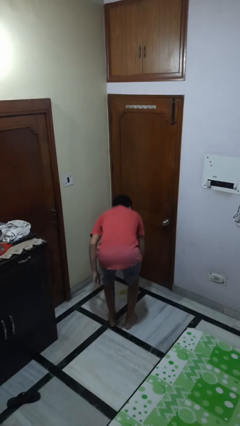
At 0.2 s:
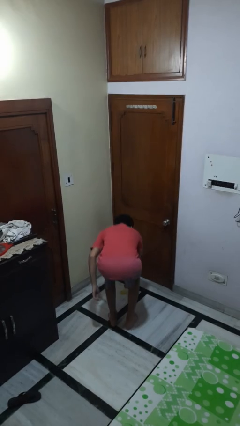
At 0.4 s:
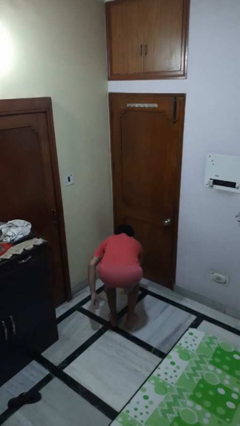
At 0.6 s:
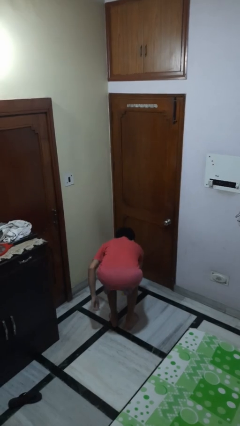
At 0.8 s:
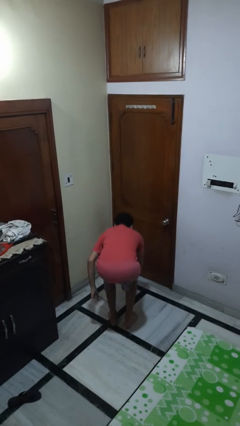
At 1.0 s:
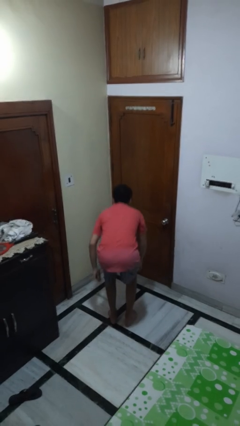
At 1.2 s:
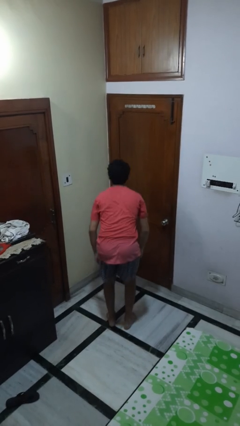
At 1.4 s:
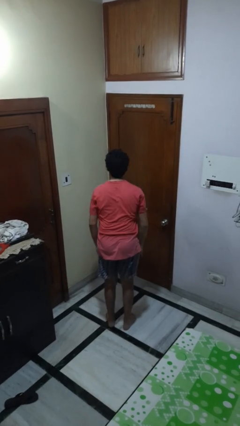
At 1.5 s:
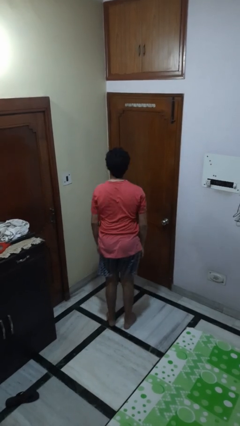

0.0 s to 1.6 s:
person picks up object from floor

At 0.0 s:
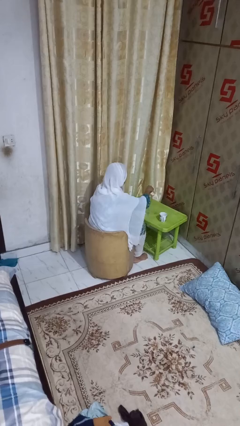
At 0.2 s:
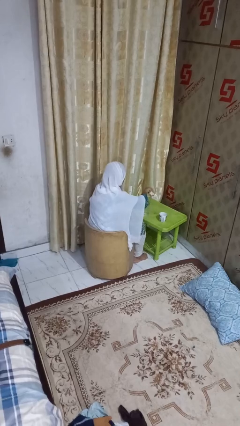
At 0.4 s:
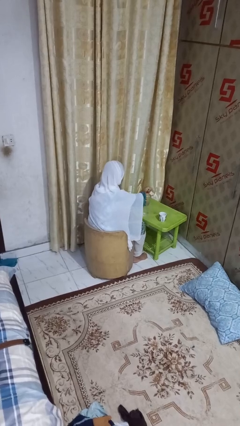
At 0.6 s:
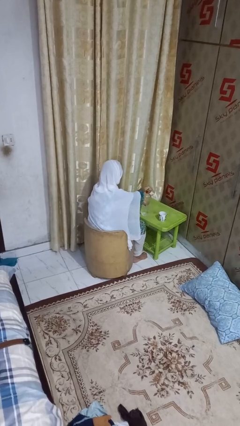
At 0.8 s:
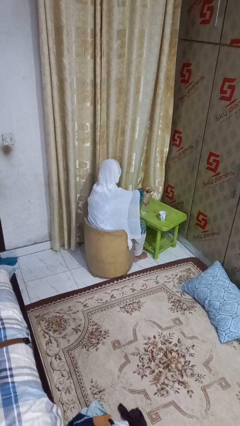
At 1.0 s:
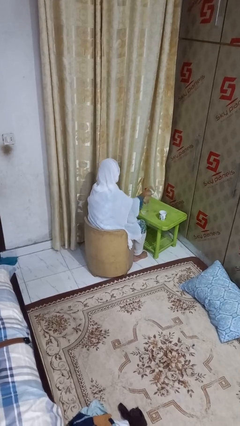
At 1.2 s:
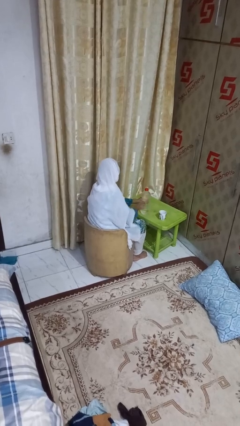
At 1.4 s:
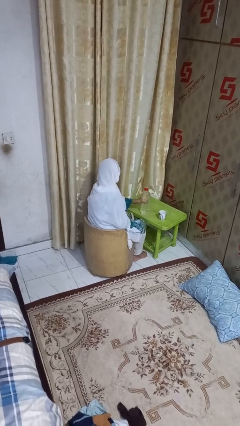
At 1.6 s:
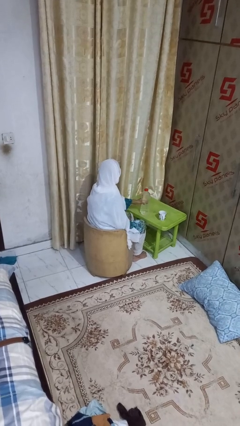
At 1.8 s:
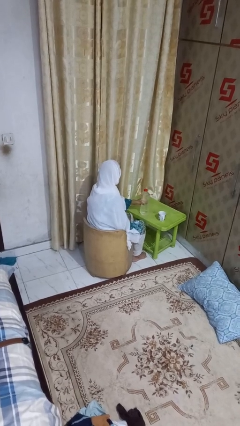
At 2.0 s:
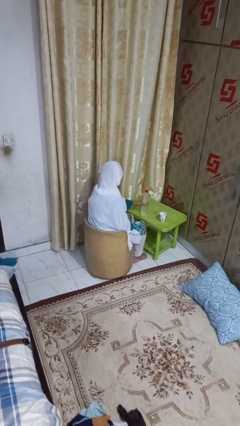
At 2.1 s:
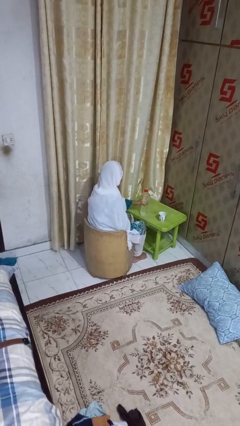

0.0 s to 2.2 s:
person screws lid to bottle

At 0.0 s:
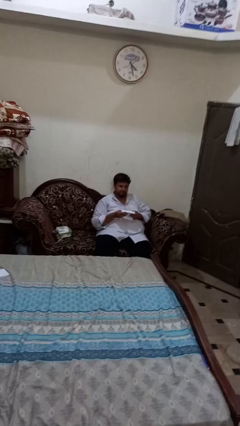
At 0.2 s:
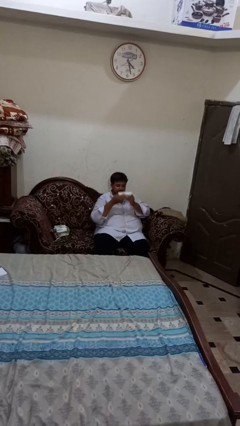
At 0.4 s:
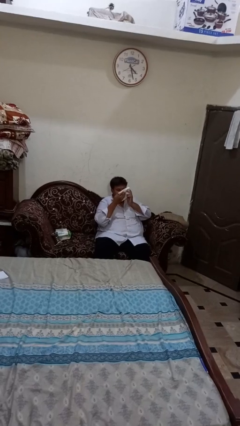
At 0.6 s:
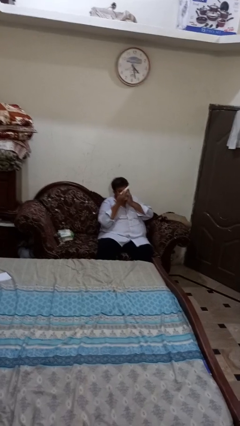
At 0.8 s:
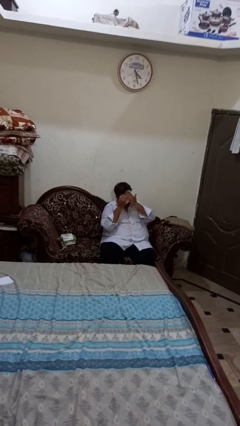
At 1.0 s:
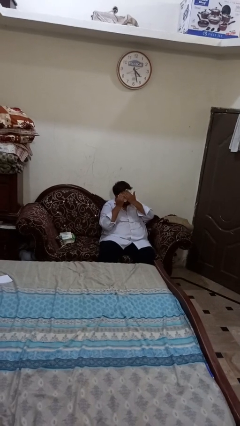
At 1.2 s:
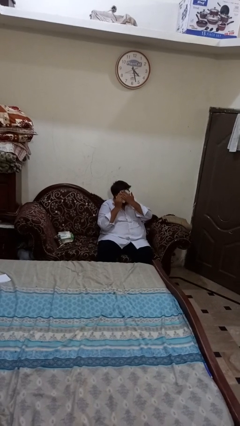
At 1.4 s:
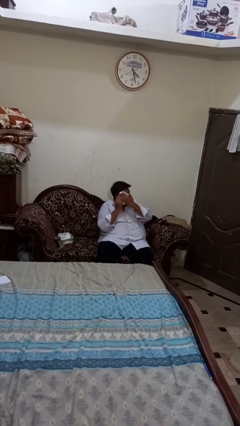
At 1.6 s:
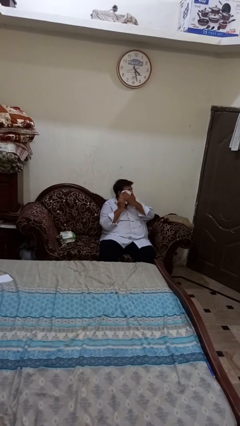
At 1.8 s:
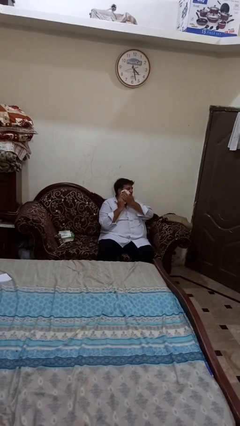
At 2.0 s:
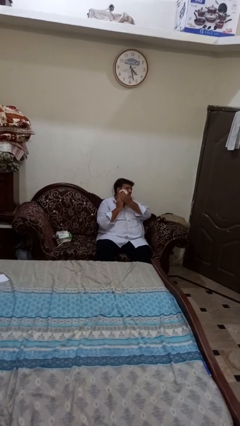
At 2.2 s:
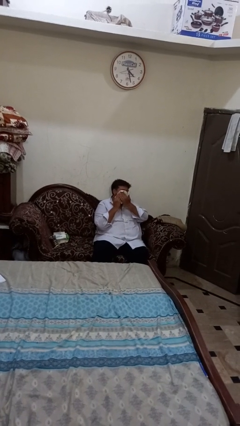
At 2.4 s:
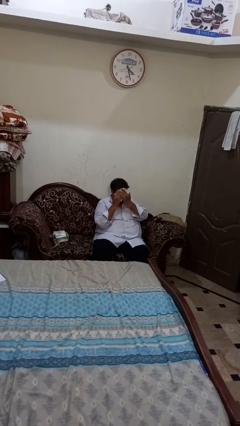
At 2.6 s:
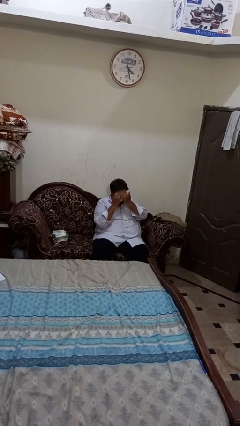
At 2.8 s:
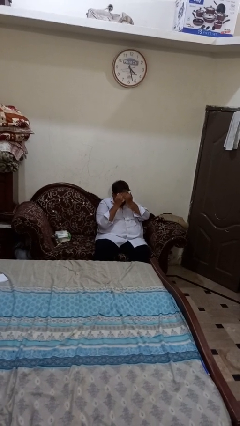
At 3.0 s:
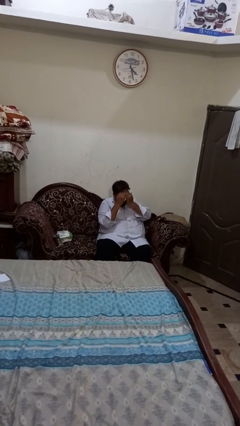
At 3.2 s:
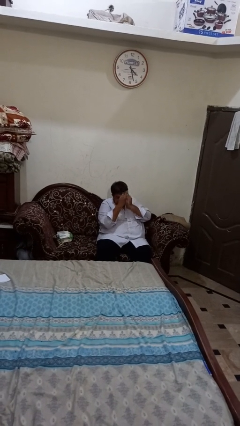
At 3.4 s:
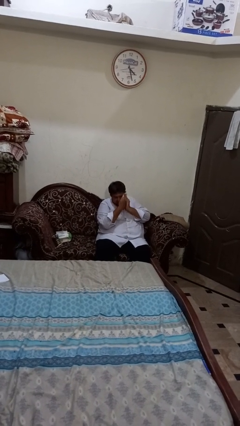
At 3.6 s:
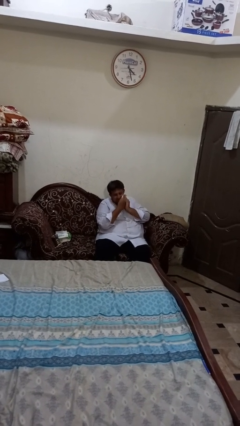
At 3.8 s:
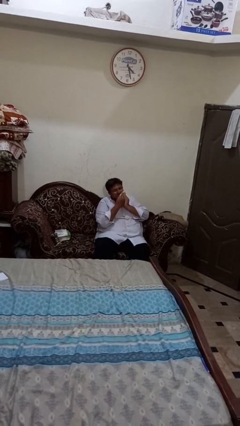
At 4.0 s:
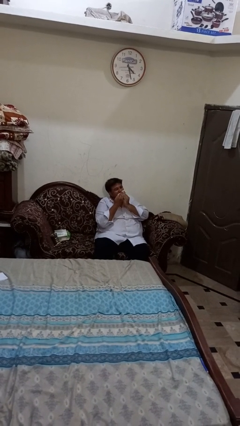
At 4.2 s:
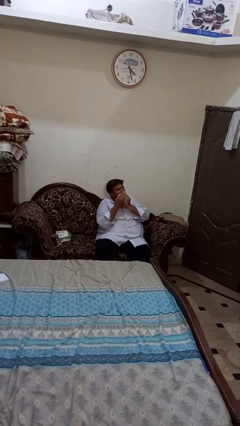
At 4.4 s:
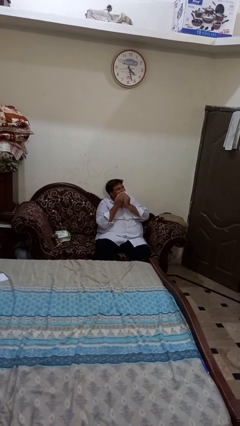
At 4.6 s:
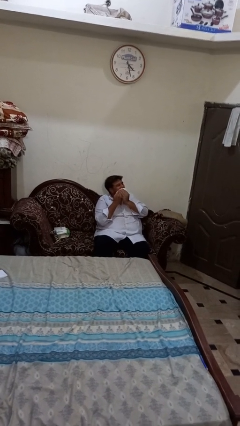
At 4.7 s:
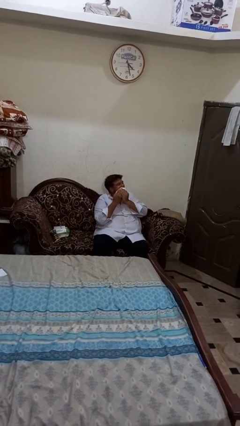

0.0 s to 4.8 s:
person wipes mouth with napkin

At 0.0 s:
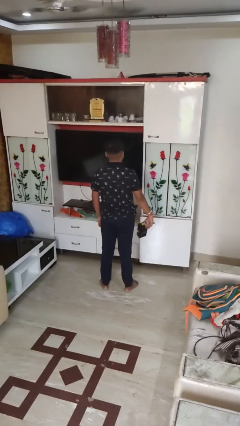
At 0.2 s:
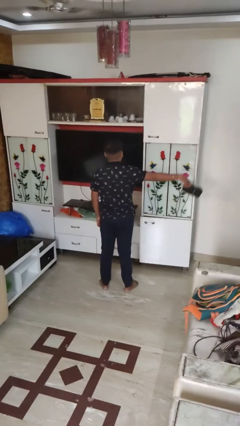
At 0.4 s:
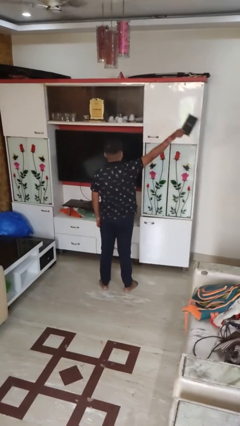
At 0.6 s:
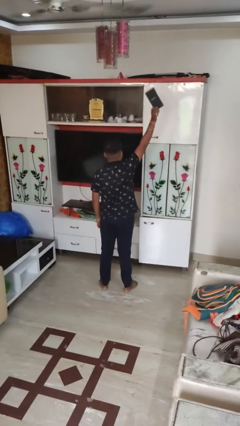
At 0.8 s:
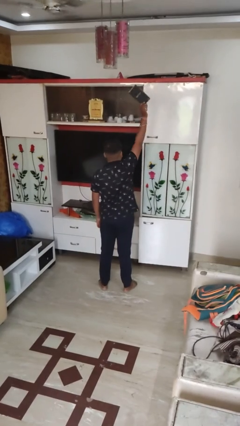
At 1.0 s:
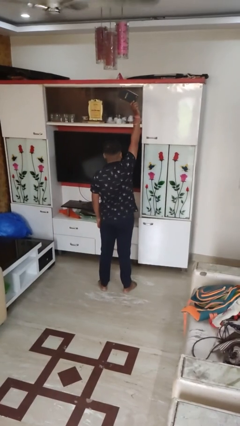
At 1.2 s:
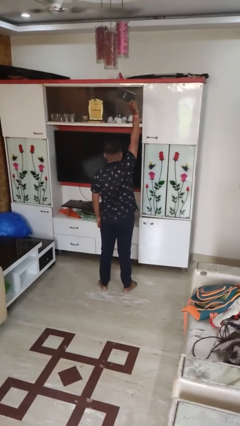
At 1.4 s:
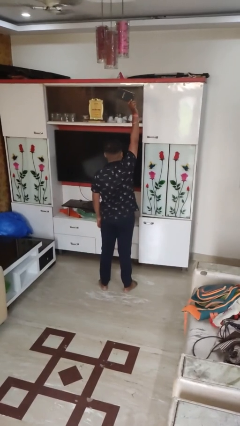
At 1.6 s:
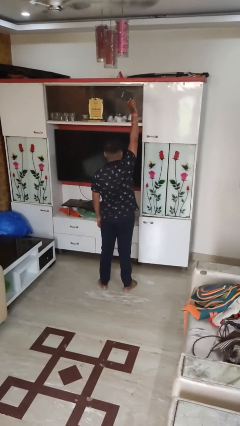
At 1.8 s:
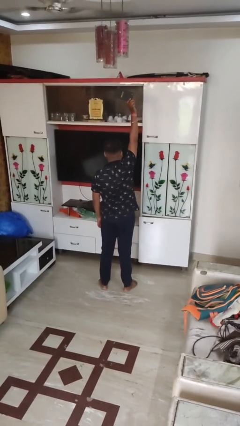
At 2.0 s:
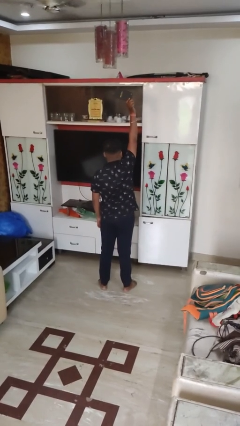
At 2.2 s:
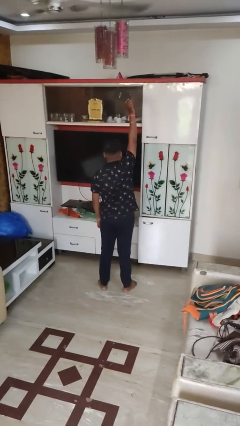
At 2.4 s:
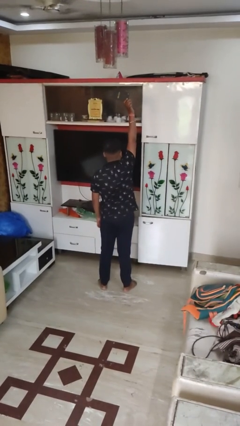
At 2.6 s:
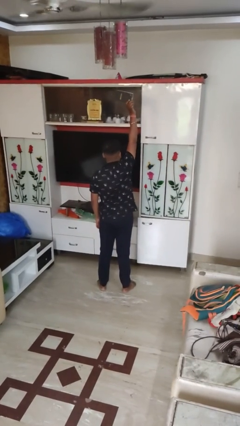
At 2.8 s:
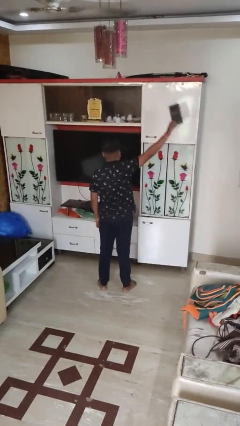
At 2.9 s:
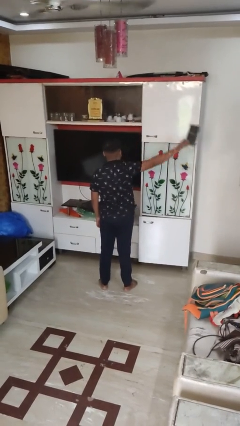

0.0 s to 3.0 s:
person holds object above head

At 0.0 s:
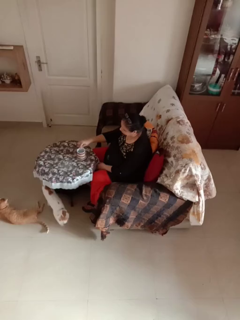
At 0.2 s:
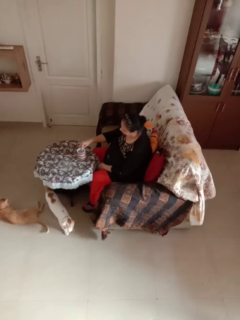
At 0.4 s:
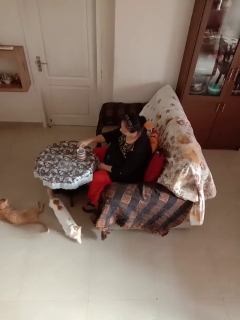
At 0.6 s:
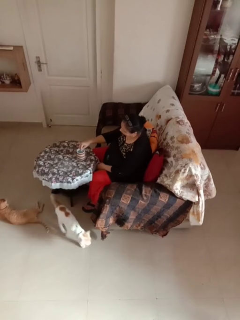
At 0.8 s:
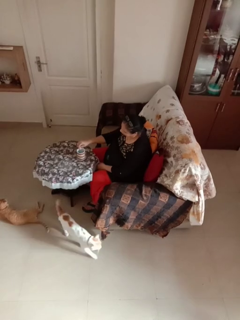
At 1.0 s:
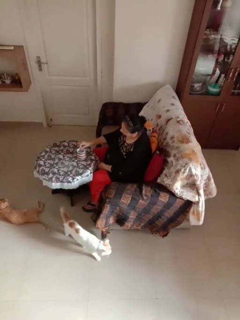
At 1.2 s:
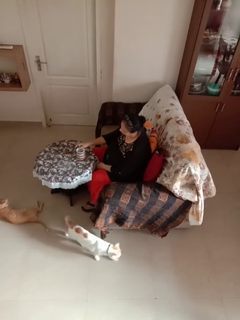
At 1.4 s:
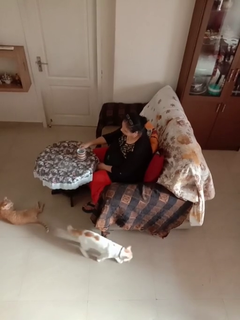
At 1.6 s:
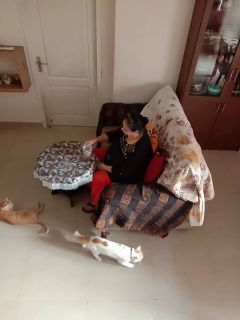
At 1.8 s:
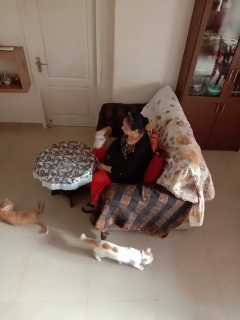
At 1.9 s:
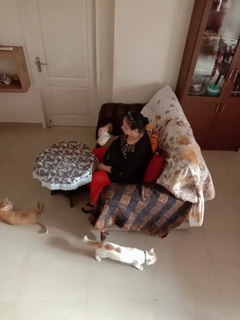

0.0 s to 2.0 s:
person stirs mug

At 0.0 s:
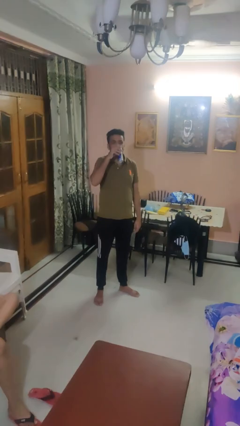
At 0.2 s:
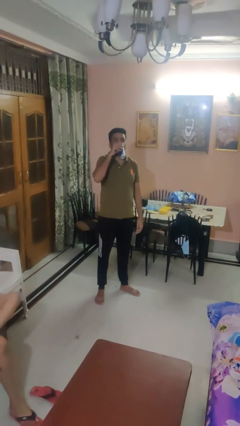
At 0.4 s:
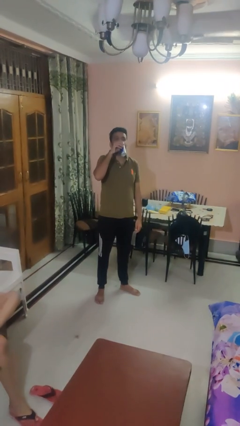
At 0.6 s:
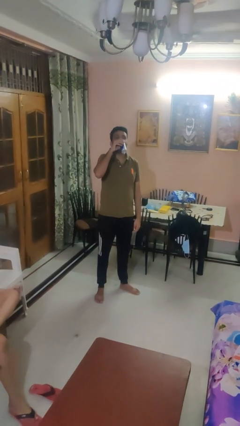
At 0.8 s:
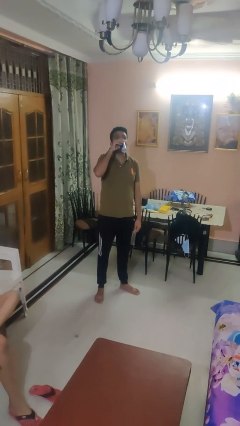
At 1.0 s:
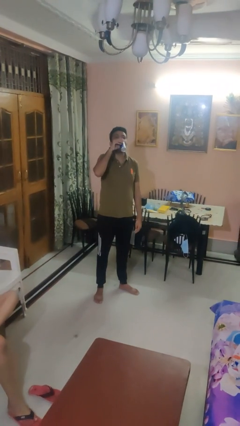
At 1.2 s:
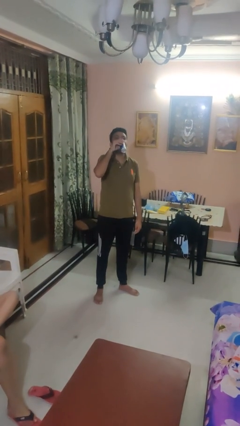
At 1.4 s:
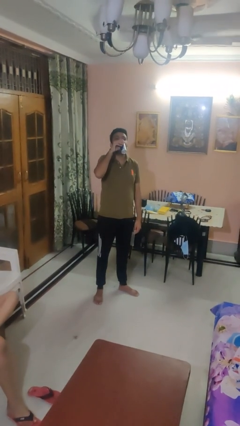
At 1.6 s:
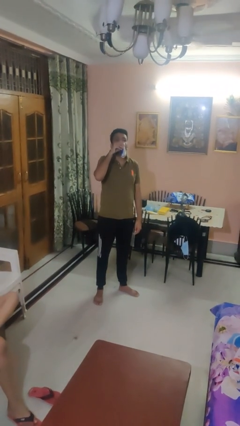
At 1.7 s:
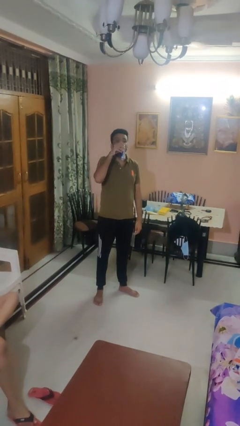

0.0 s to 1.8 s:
person drinks from beverage can

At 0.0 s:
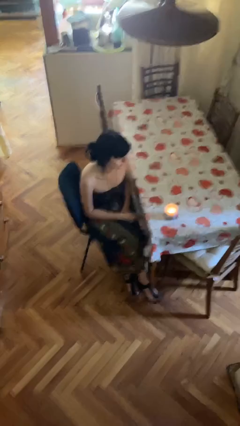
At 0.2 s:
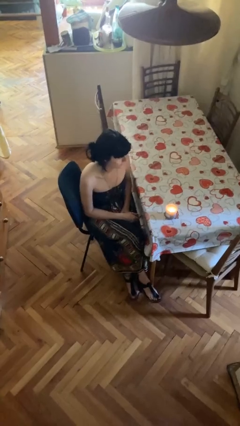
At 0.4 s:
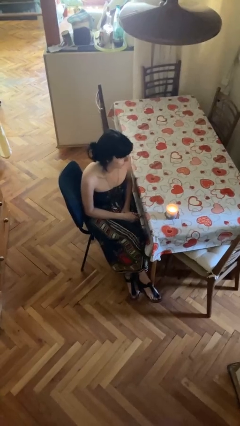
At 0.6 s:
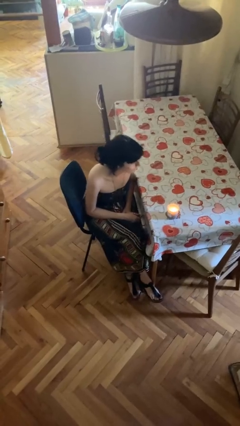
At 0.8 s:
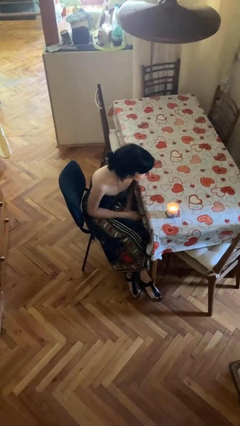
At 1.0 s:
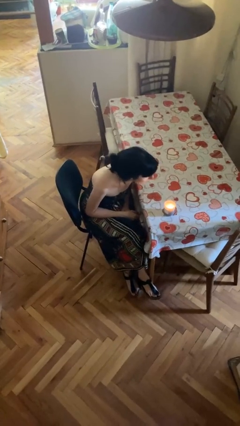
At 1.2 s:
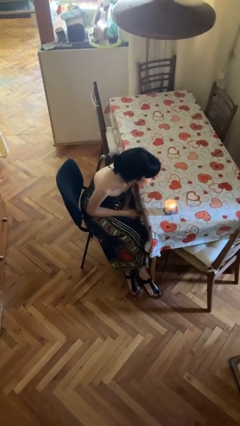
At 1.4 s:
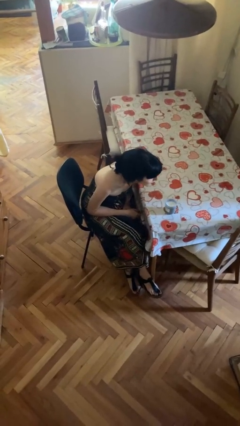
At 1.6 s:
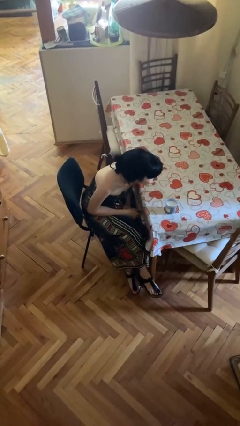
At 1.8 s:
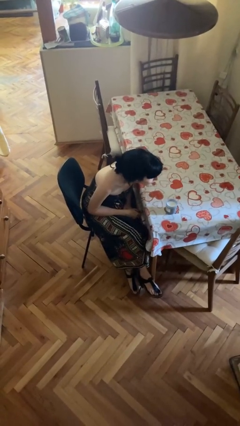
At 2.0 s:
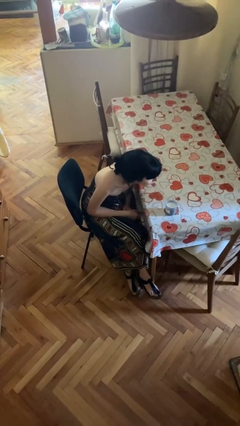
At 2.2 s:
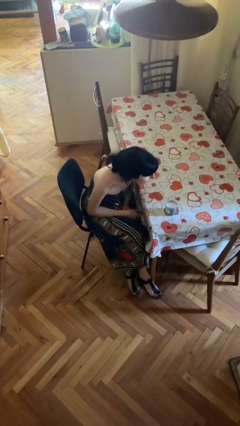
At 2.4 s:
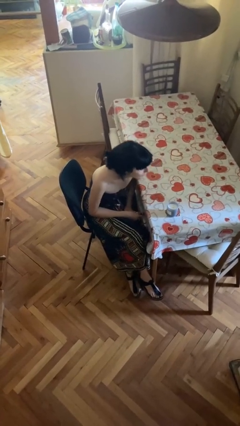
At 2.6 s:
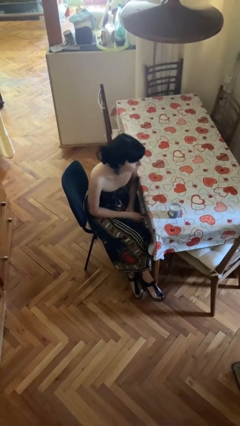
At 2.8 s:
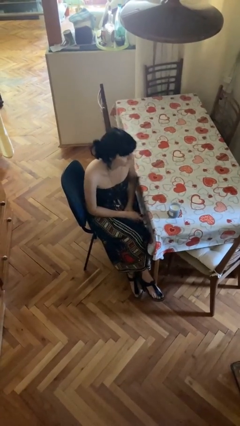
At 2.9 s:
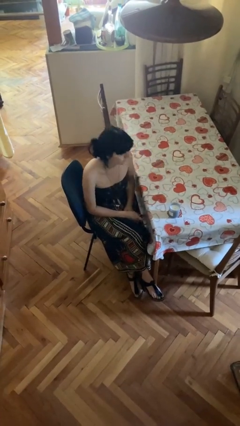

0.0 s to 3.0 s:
person extinguishes candle
